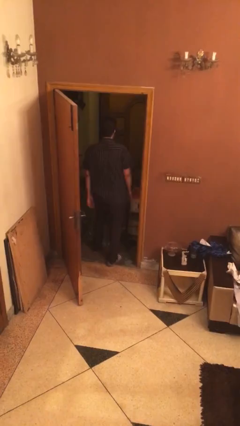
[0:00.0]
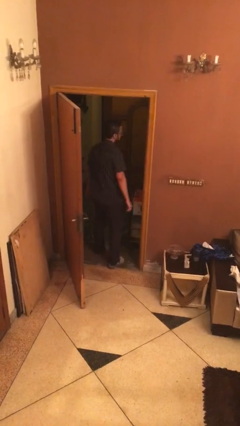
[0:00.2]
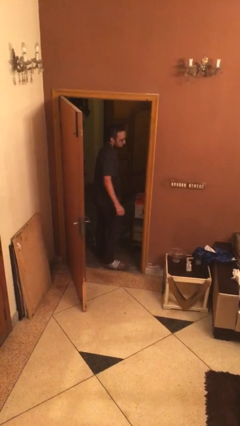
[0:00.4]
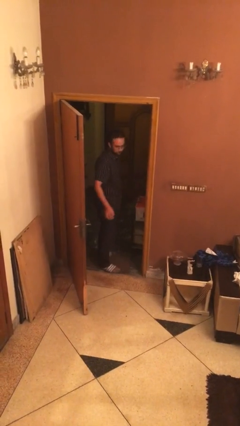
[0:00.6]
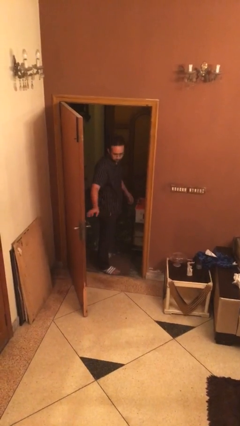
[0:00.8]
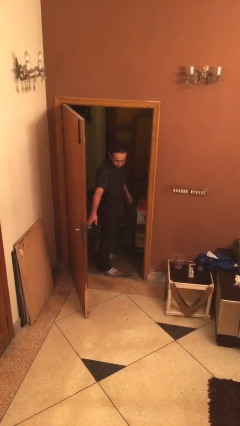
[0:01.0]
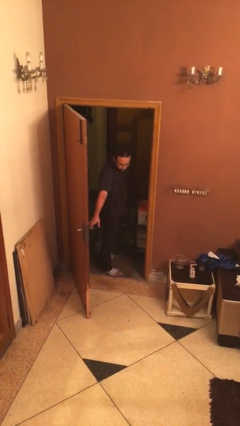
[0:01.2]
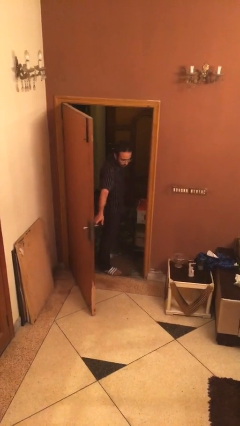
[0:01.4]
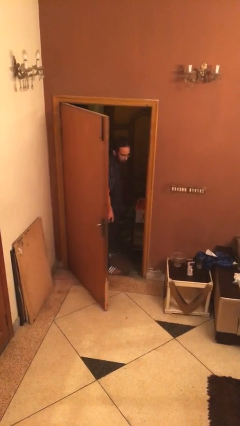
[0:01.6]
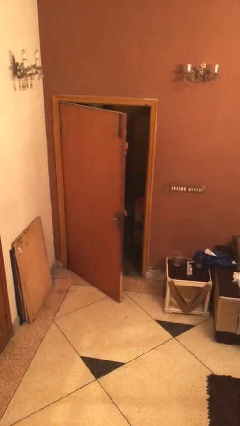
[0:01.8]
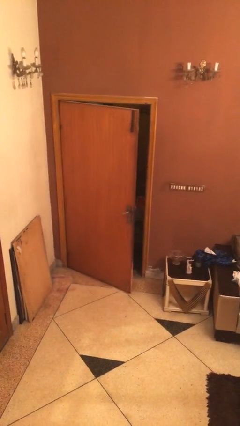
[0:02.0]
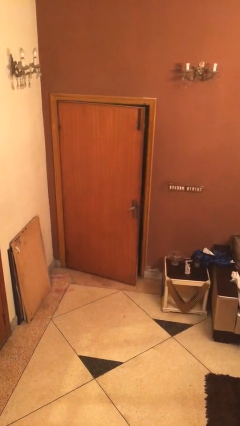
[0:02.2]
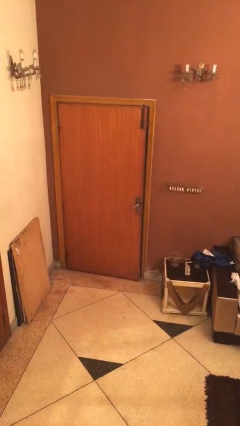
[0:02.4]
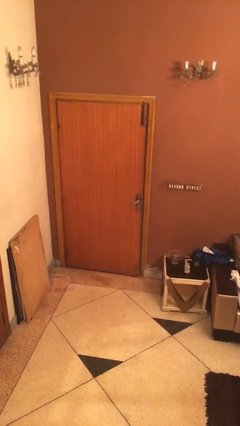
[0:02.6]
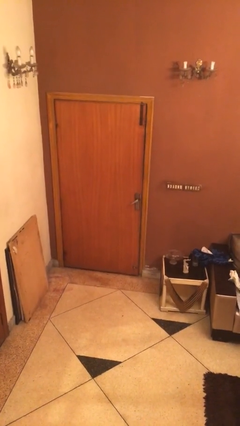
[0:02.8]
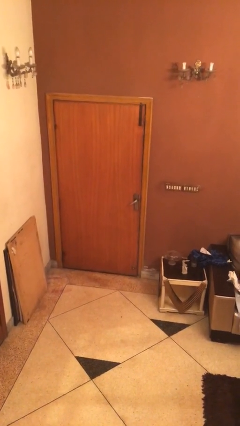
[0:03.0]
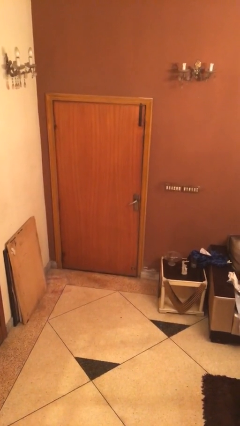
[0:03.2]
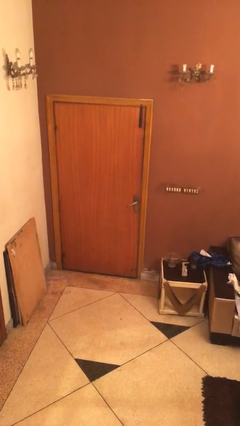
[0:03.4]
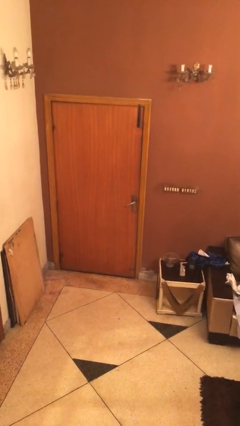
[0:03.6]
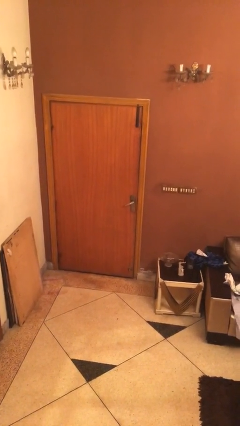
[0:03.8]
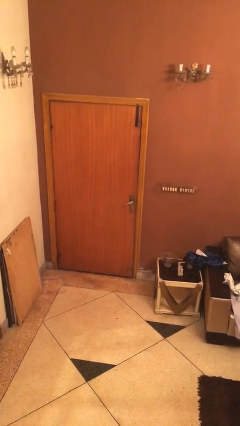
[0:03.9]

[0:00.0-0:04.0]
person closes facility door

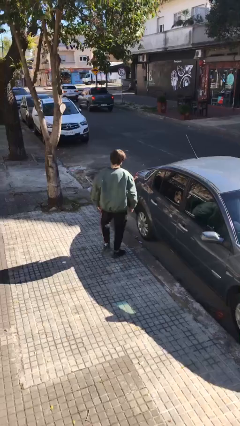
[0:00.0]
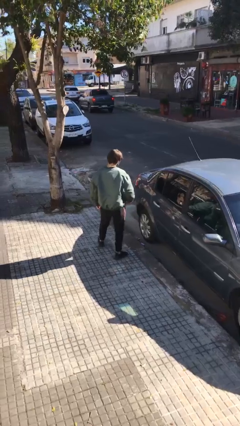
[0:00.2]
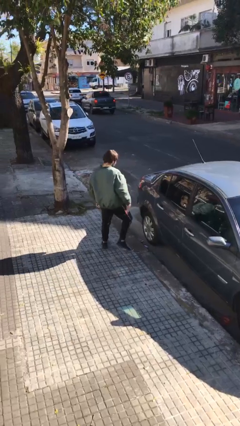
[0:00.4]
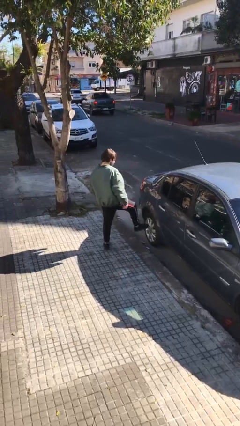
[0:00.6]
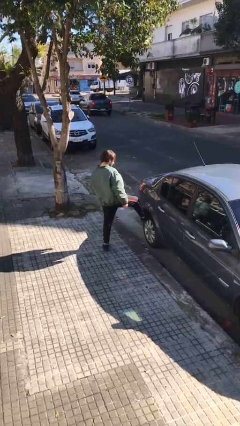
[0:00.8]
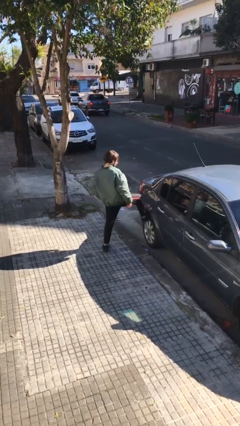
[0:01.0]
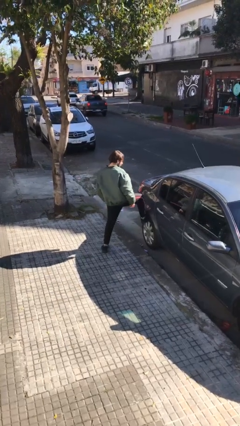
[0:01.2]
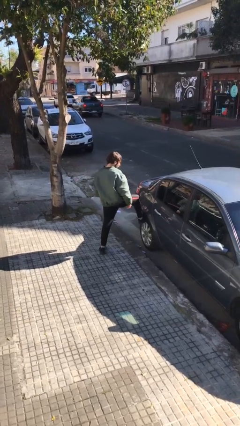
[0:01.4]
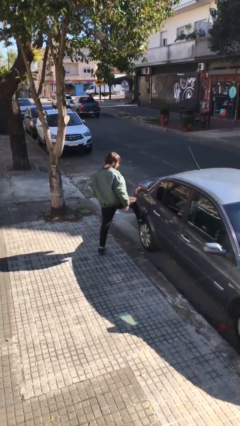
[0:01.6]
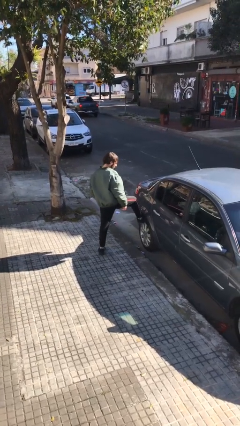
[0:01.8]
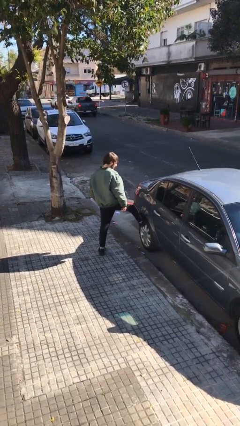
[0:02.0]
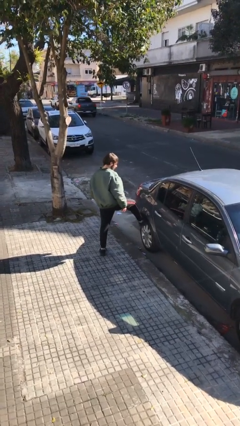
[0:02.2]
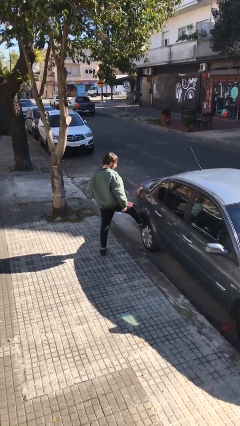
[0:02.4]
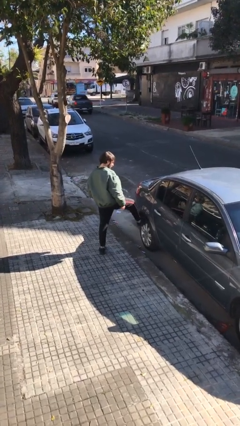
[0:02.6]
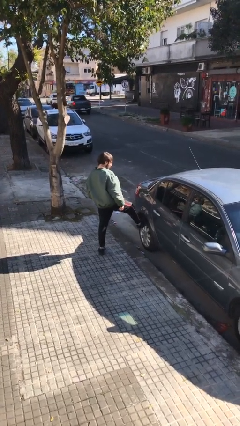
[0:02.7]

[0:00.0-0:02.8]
person kicks car tires

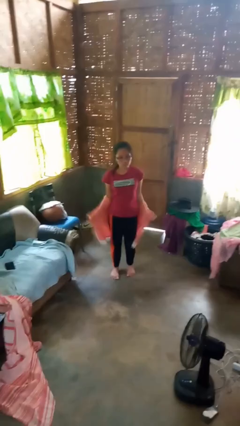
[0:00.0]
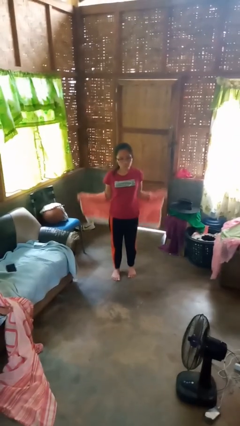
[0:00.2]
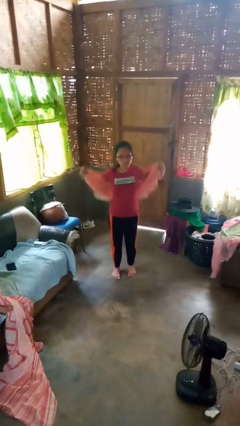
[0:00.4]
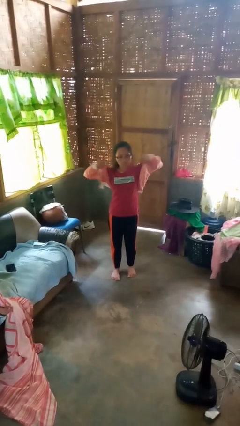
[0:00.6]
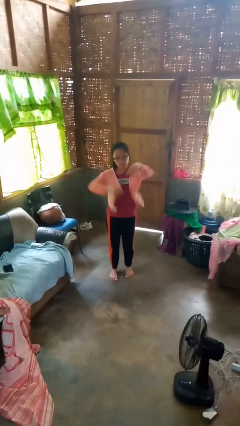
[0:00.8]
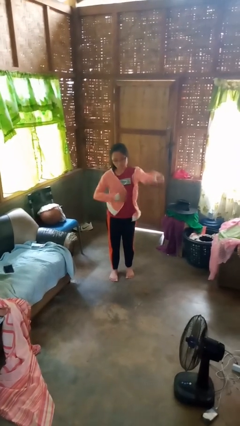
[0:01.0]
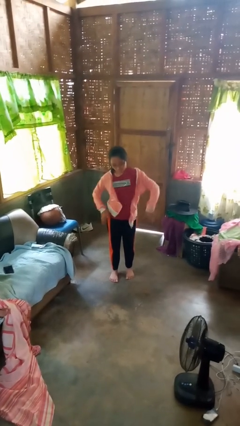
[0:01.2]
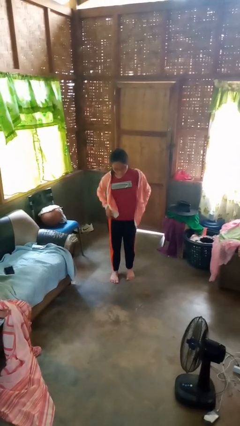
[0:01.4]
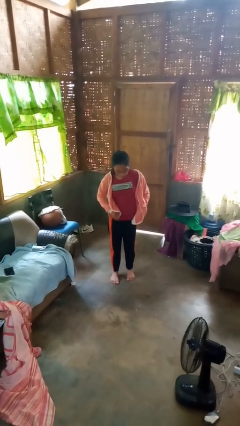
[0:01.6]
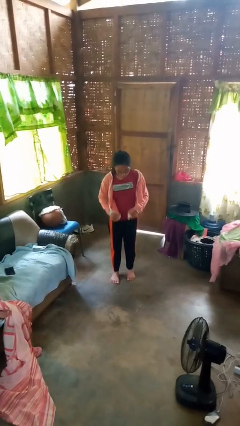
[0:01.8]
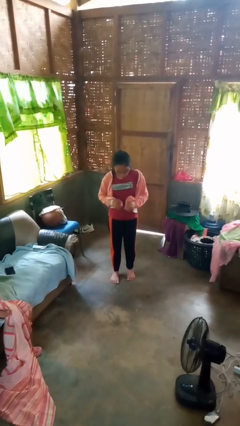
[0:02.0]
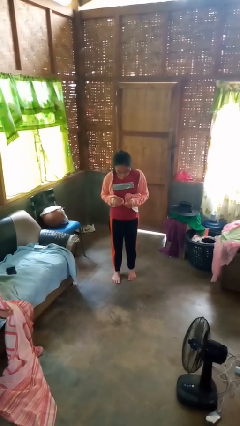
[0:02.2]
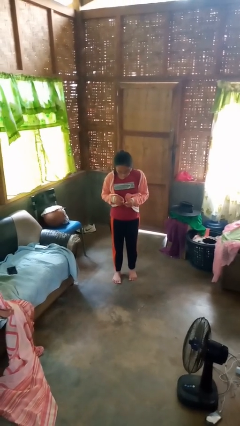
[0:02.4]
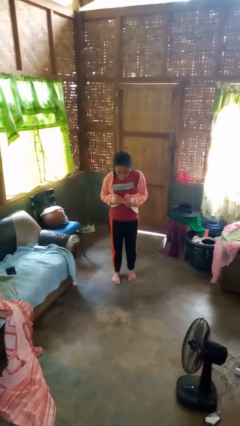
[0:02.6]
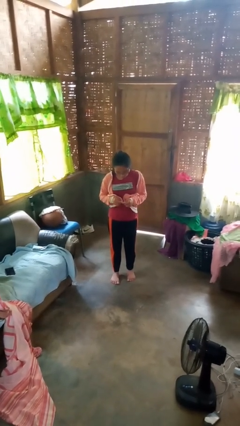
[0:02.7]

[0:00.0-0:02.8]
person puts on jacket

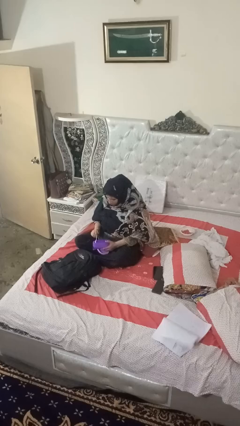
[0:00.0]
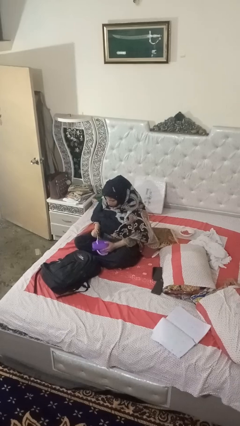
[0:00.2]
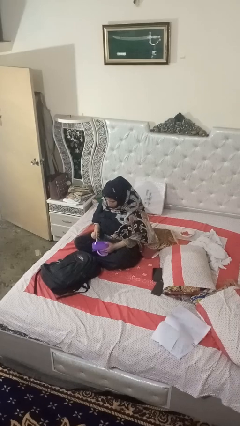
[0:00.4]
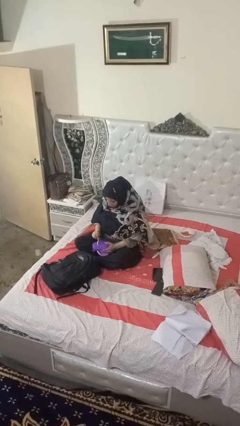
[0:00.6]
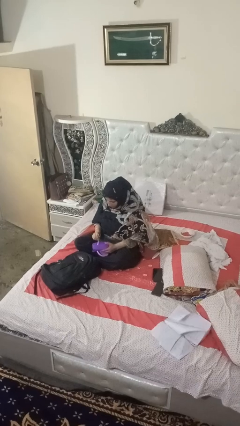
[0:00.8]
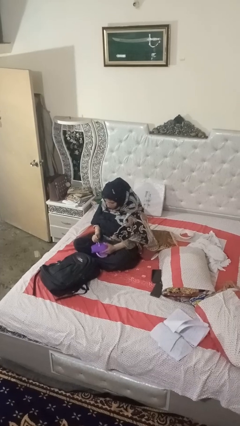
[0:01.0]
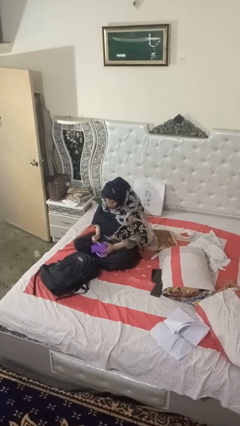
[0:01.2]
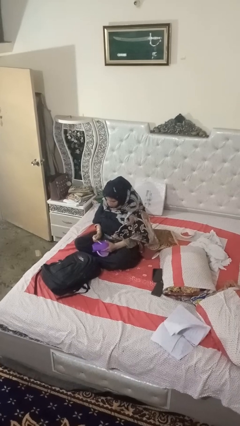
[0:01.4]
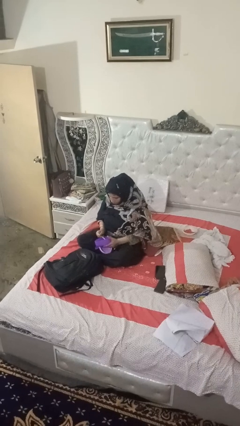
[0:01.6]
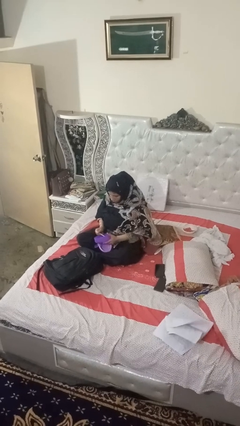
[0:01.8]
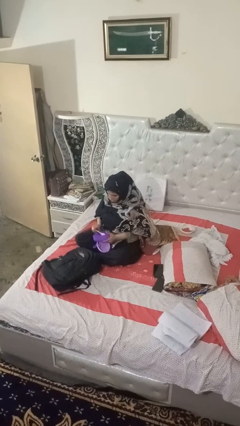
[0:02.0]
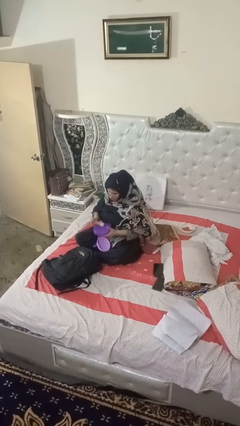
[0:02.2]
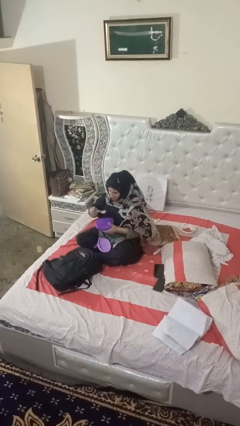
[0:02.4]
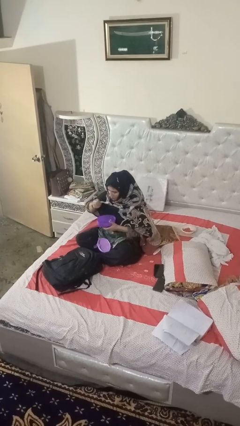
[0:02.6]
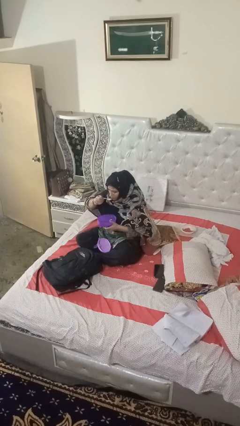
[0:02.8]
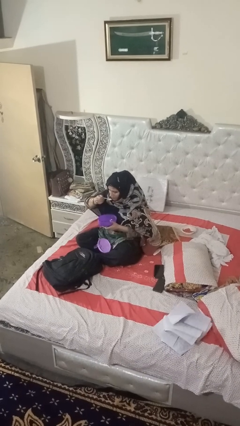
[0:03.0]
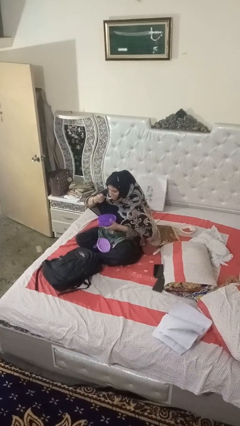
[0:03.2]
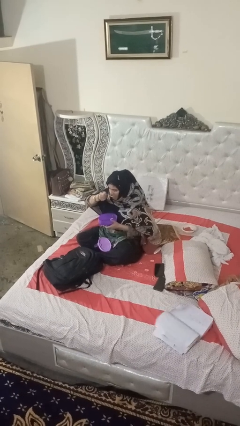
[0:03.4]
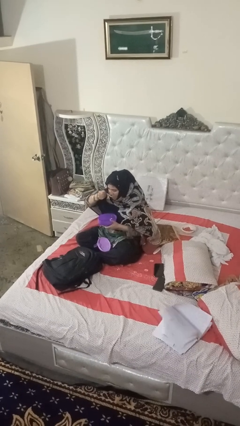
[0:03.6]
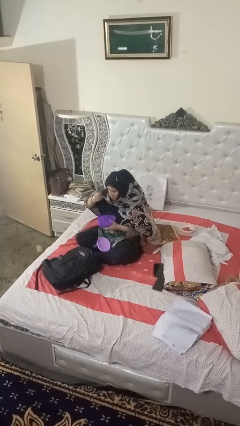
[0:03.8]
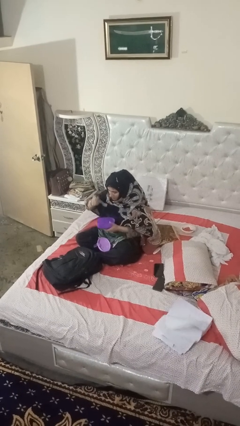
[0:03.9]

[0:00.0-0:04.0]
person eats snack from bag

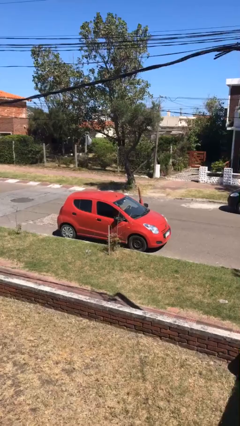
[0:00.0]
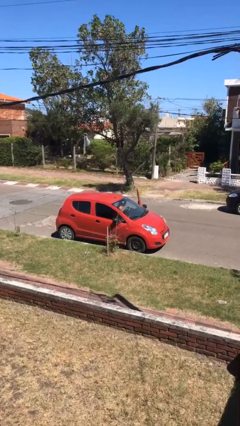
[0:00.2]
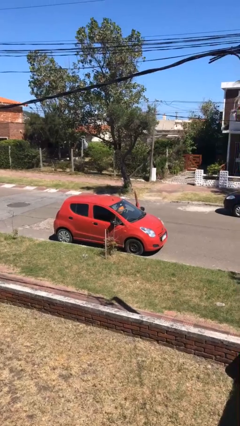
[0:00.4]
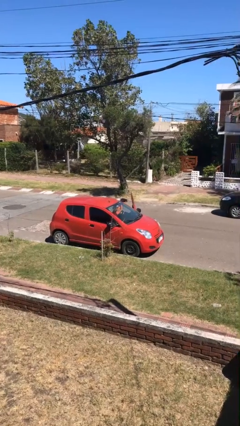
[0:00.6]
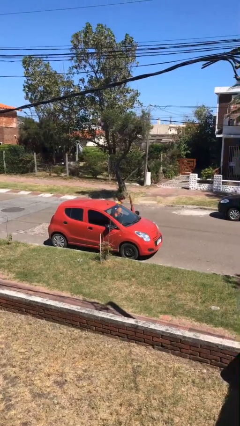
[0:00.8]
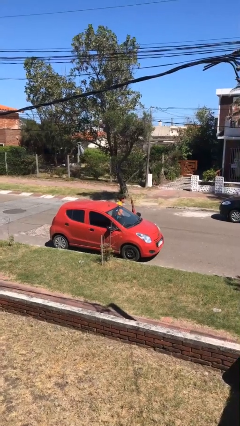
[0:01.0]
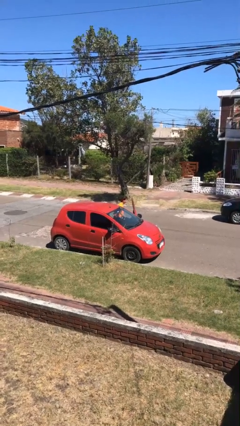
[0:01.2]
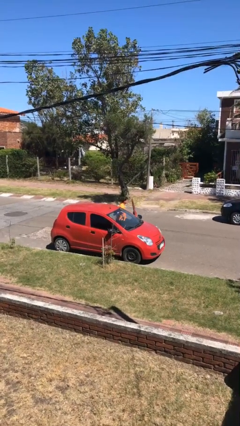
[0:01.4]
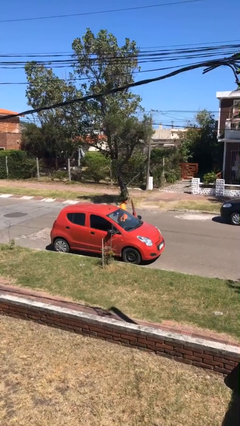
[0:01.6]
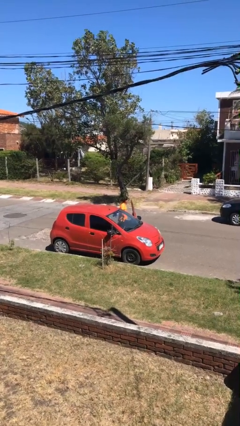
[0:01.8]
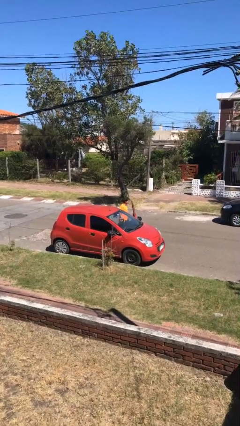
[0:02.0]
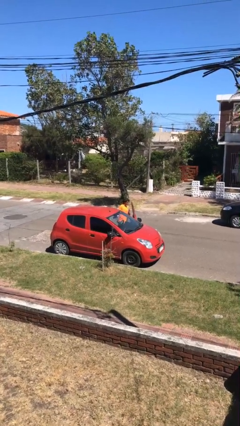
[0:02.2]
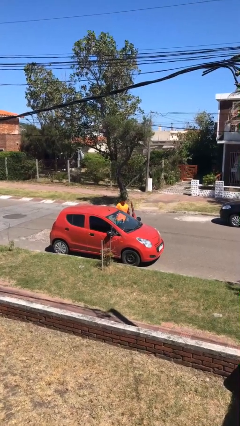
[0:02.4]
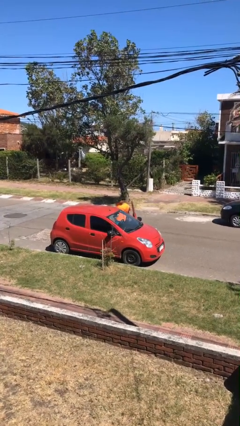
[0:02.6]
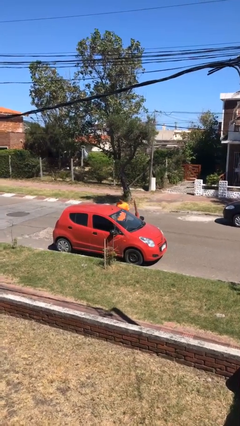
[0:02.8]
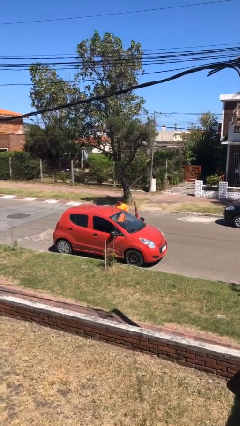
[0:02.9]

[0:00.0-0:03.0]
person exits car

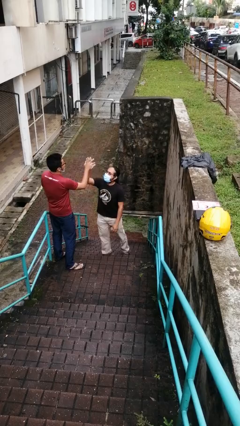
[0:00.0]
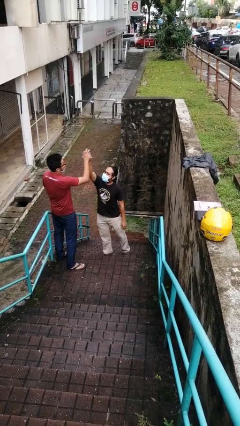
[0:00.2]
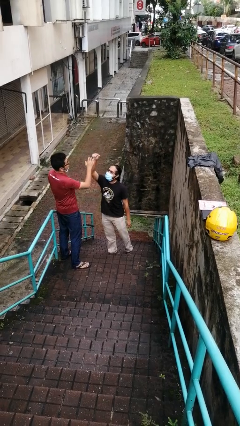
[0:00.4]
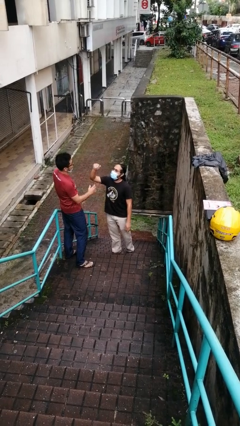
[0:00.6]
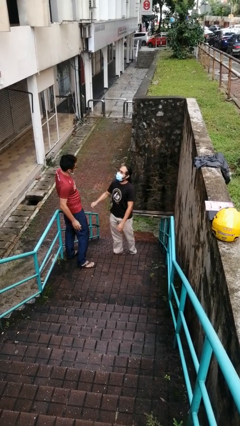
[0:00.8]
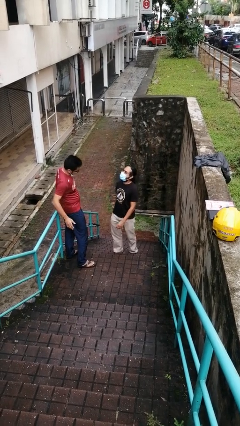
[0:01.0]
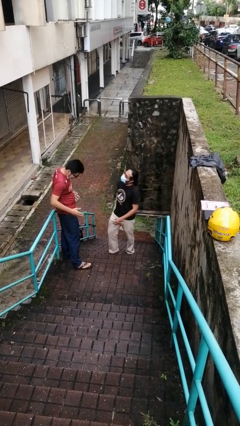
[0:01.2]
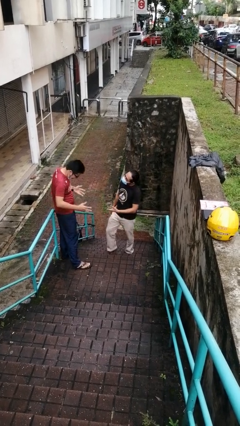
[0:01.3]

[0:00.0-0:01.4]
person highfives hand
